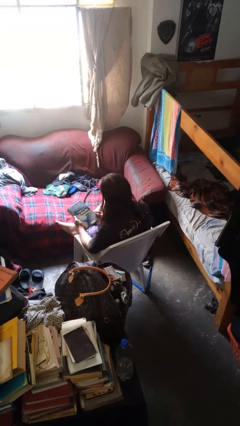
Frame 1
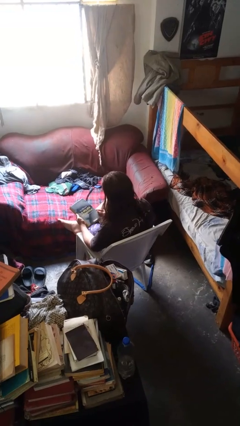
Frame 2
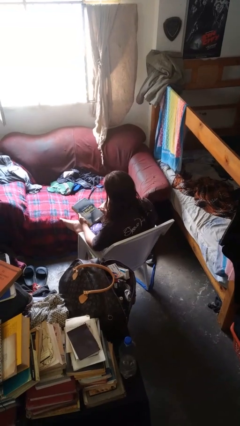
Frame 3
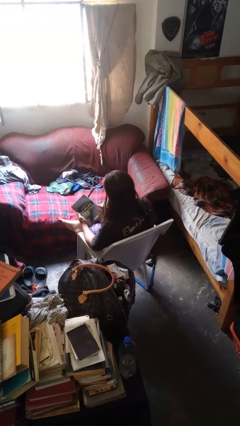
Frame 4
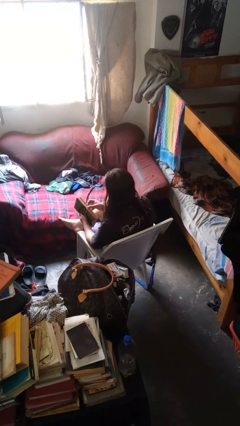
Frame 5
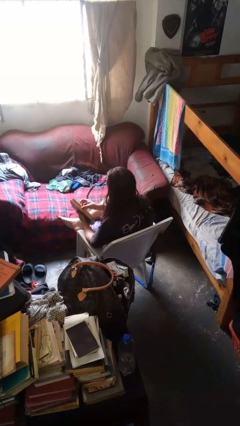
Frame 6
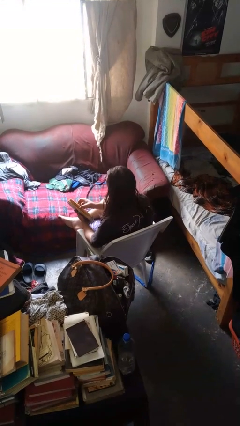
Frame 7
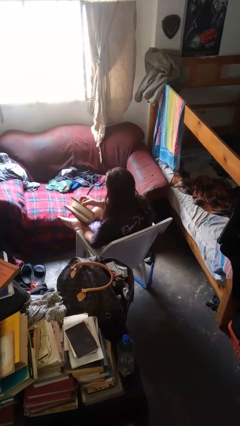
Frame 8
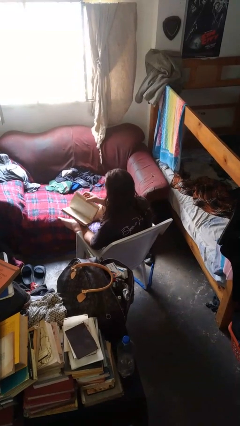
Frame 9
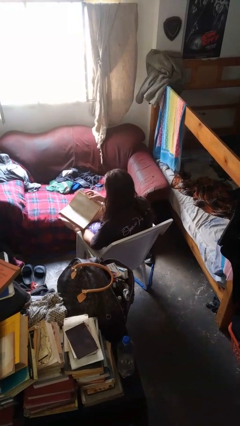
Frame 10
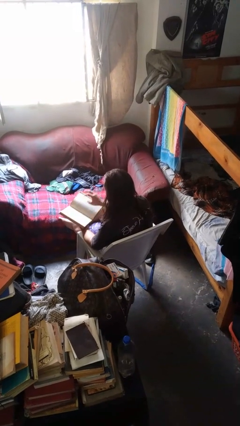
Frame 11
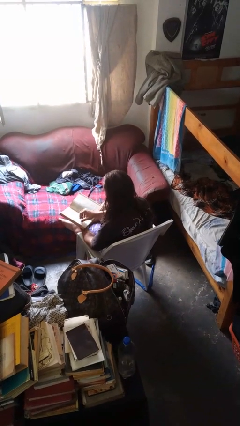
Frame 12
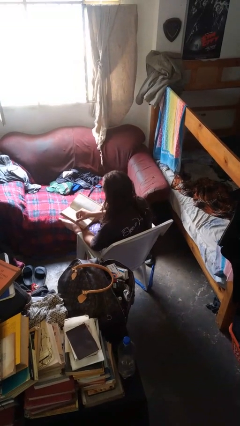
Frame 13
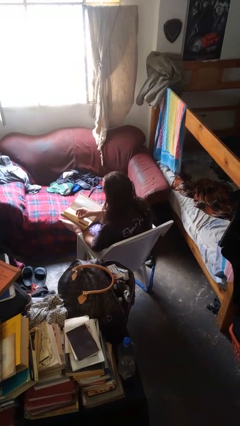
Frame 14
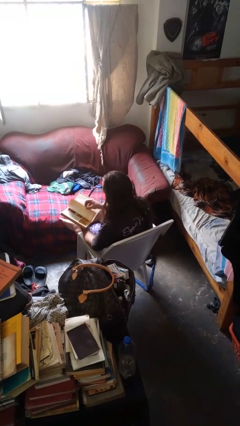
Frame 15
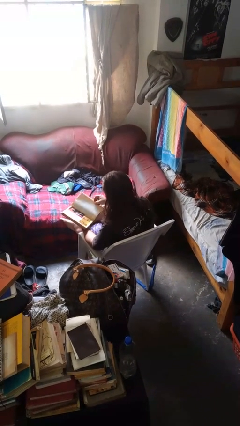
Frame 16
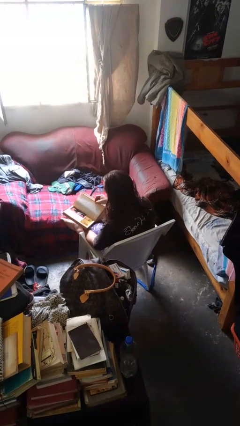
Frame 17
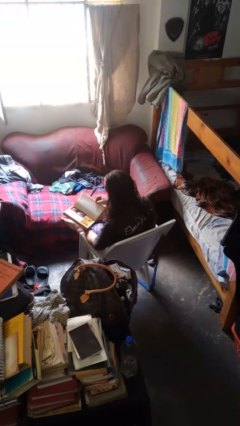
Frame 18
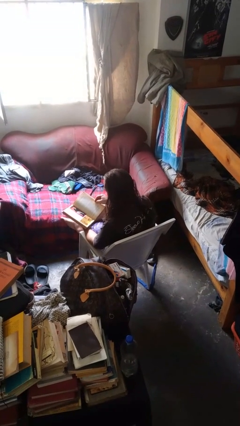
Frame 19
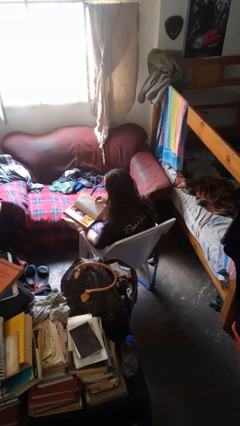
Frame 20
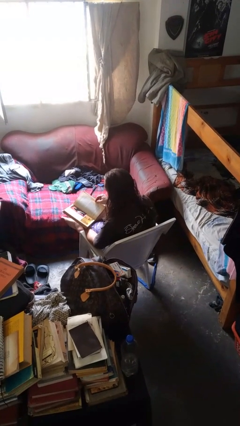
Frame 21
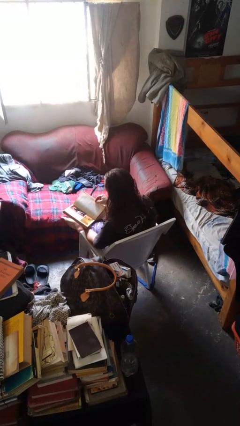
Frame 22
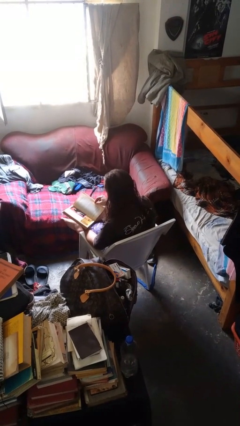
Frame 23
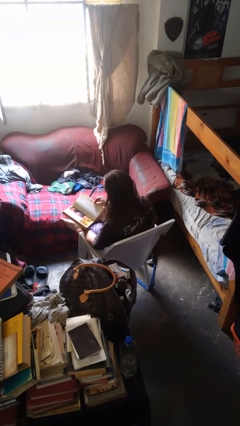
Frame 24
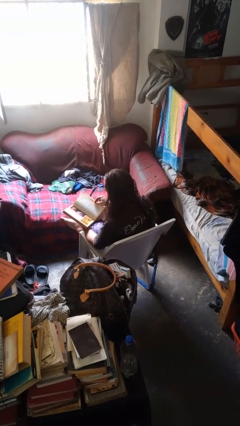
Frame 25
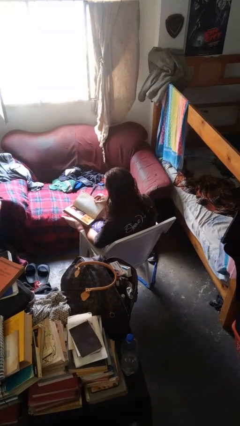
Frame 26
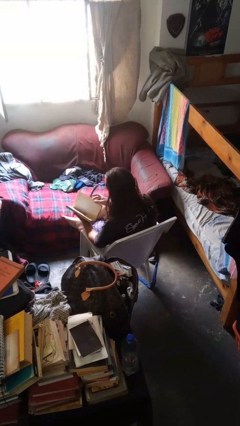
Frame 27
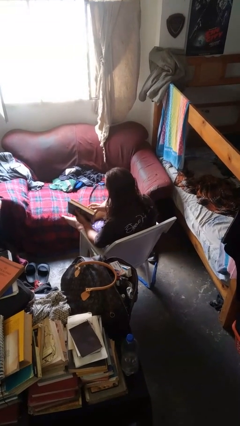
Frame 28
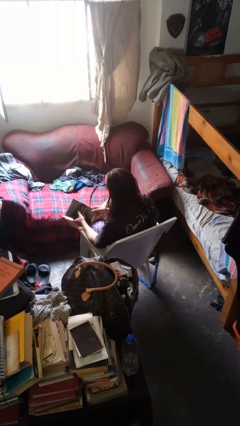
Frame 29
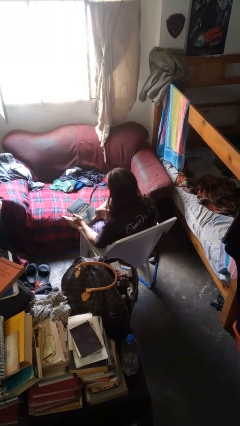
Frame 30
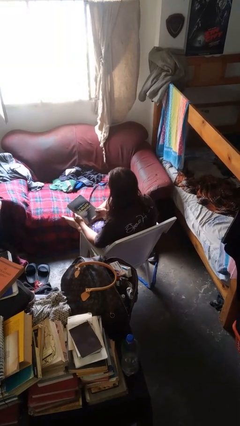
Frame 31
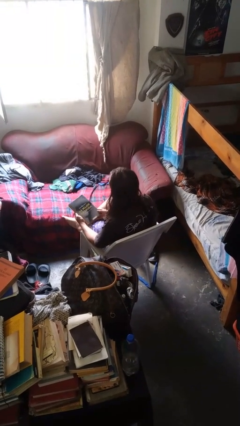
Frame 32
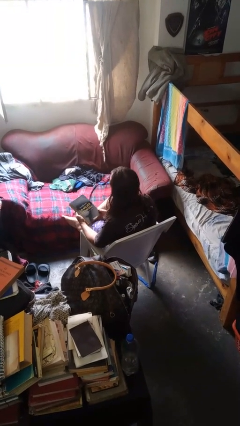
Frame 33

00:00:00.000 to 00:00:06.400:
person reads book

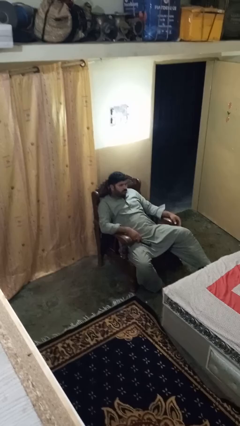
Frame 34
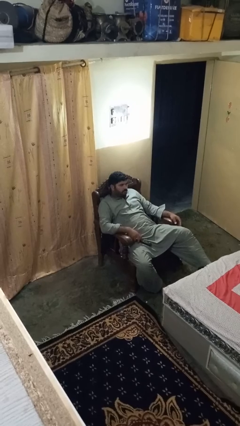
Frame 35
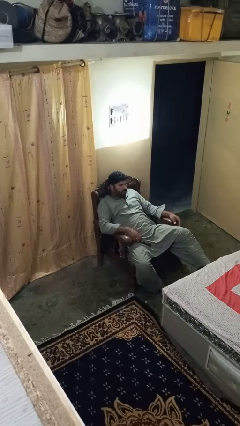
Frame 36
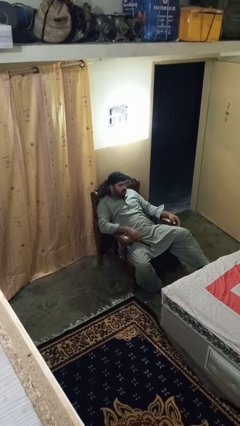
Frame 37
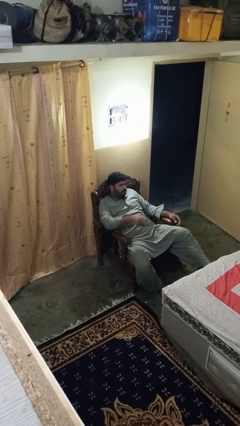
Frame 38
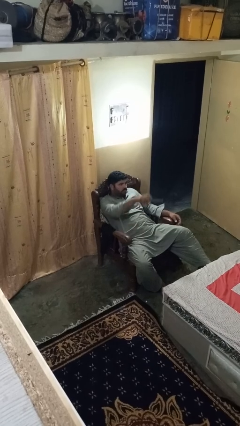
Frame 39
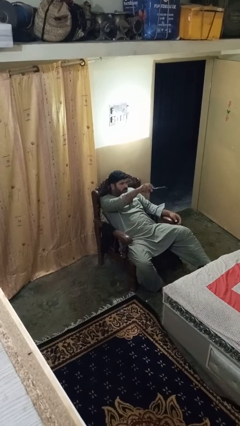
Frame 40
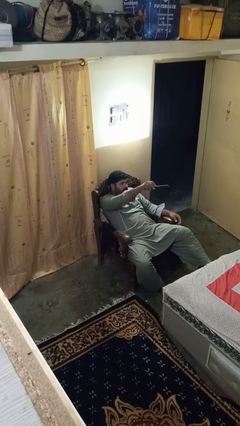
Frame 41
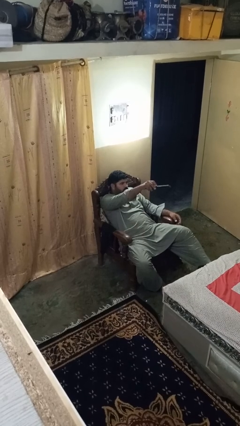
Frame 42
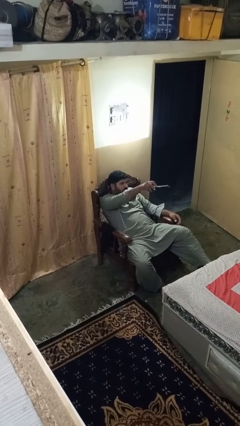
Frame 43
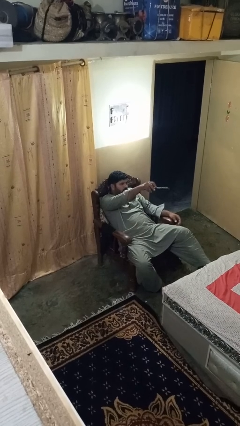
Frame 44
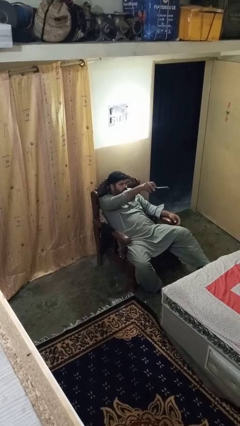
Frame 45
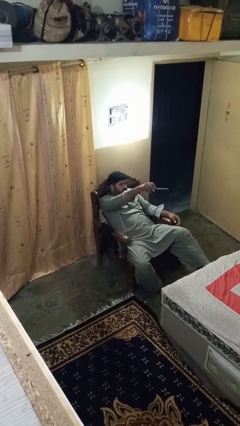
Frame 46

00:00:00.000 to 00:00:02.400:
person uses television remote

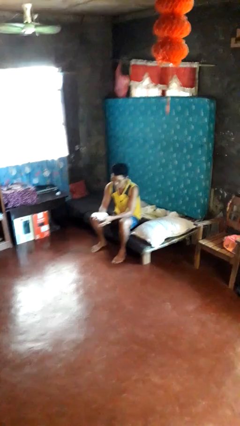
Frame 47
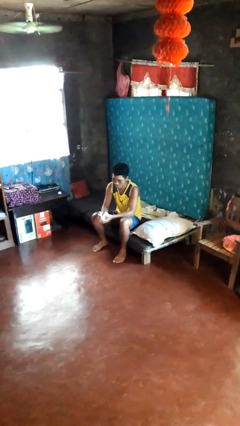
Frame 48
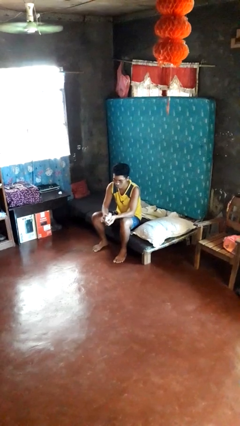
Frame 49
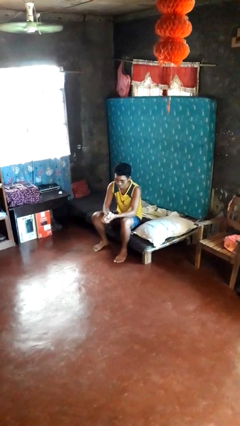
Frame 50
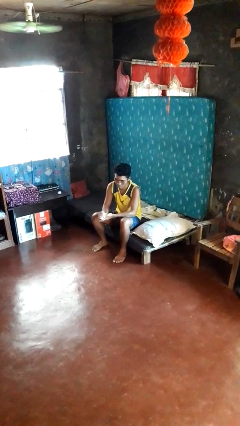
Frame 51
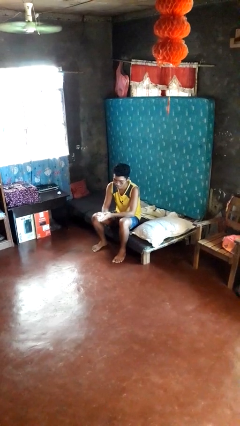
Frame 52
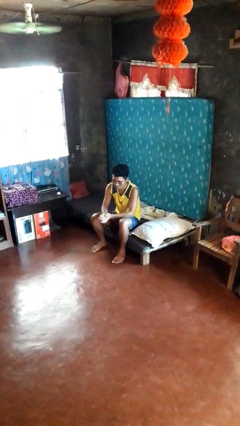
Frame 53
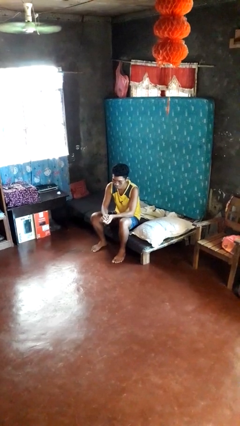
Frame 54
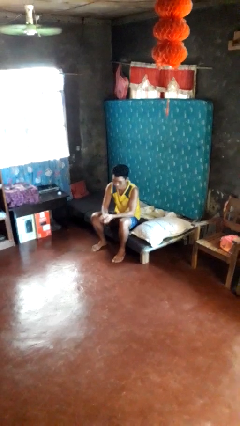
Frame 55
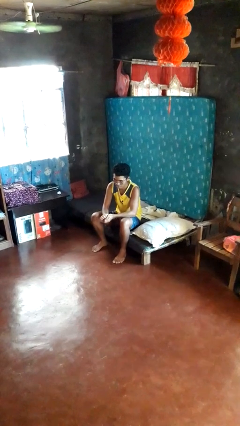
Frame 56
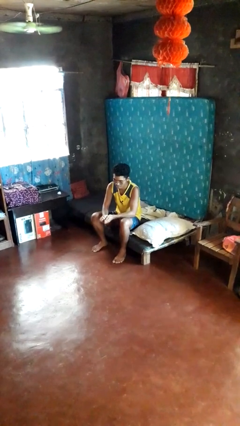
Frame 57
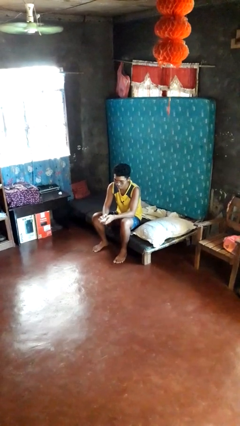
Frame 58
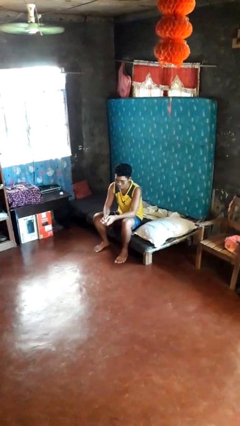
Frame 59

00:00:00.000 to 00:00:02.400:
person crumples paper

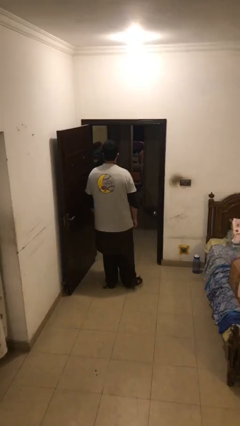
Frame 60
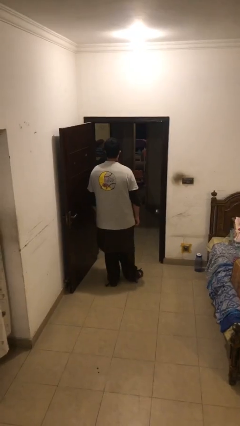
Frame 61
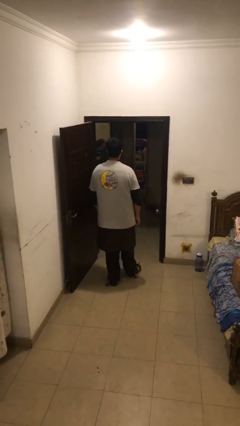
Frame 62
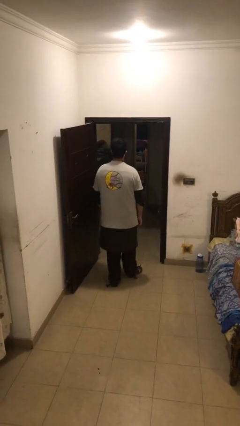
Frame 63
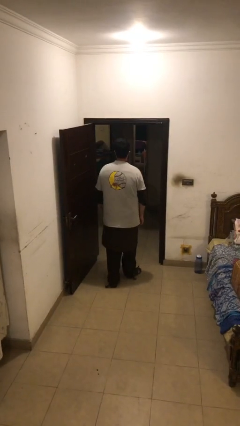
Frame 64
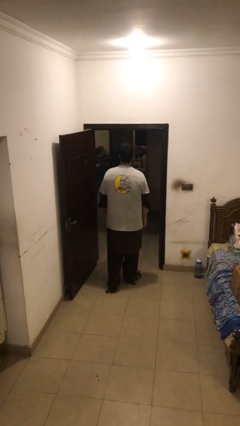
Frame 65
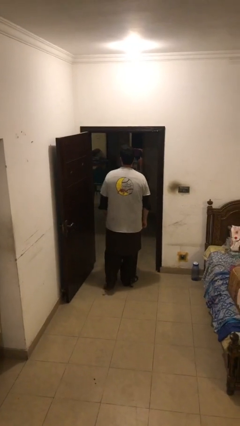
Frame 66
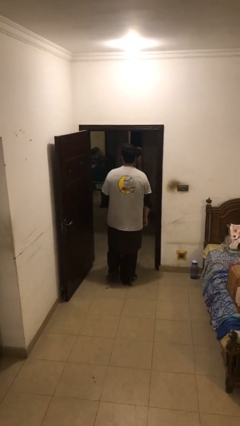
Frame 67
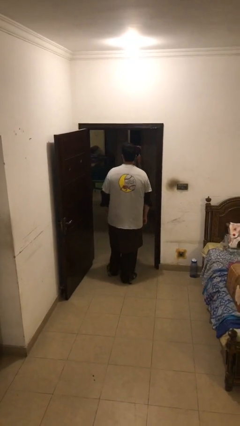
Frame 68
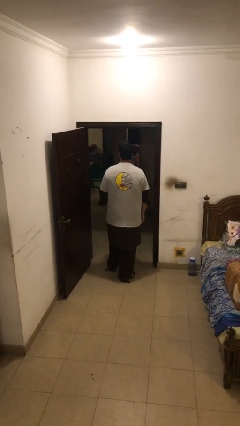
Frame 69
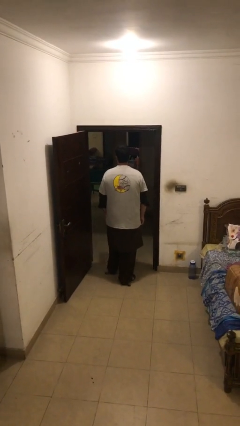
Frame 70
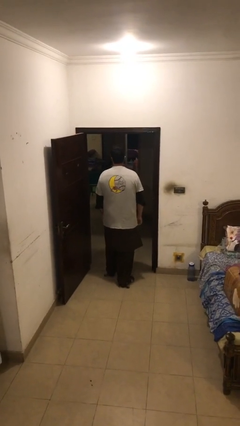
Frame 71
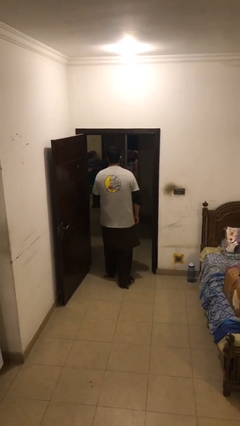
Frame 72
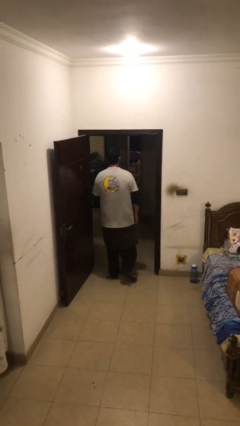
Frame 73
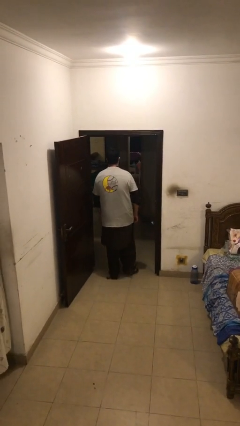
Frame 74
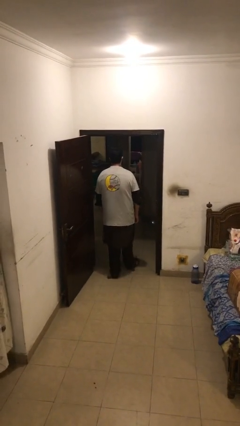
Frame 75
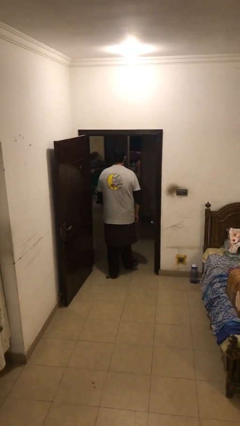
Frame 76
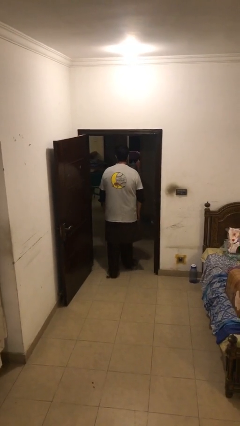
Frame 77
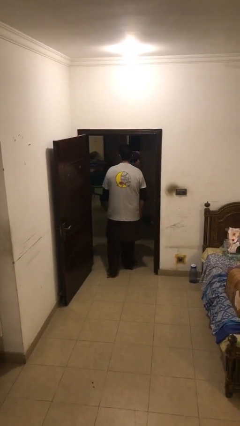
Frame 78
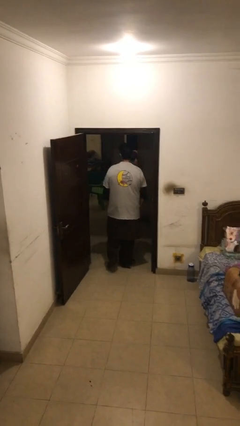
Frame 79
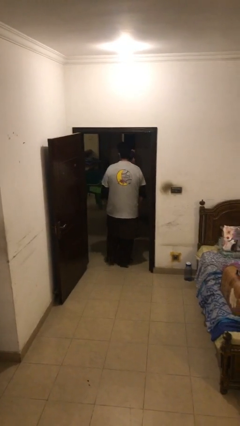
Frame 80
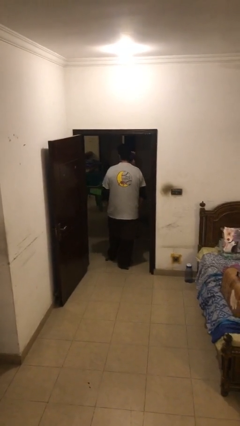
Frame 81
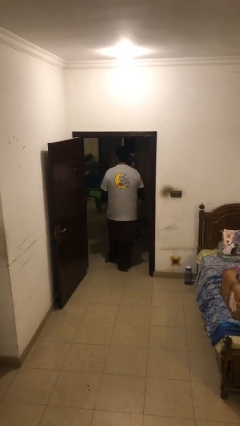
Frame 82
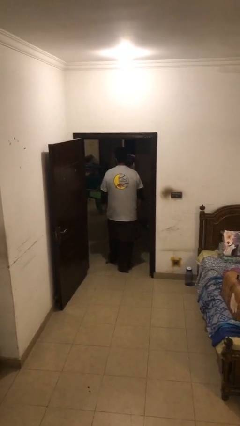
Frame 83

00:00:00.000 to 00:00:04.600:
person exits scene through structure

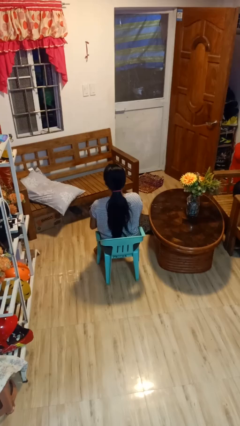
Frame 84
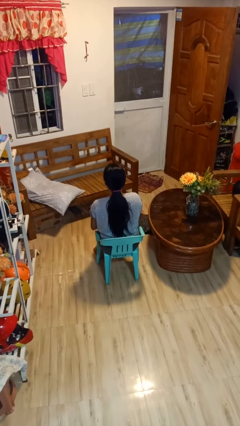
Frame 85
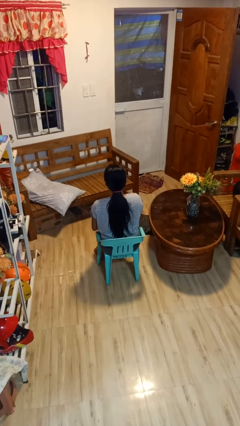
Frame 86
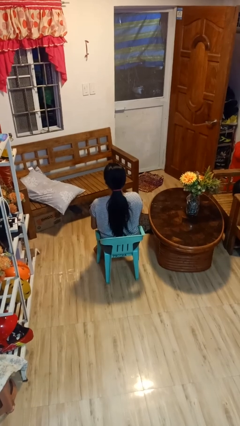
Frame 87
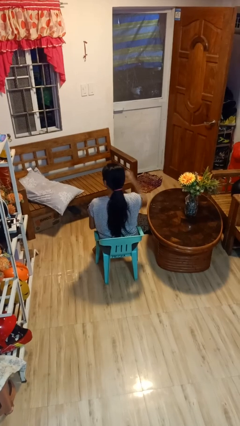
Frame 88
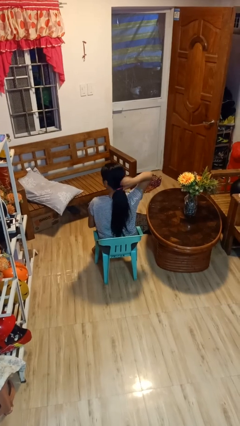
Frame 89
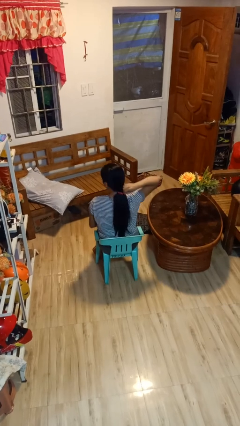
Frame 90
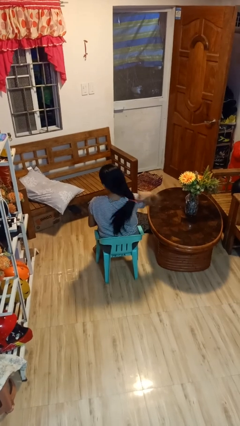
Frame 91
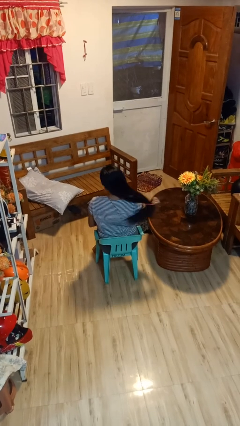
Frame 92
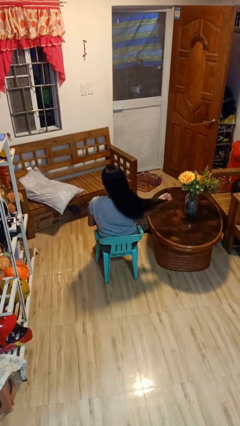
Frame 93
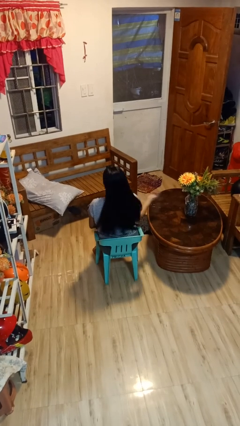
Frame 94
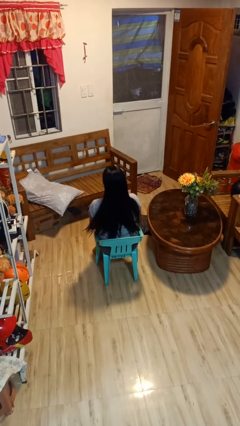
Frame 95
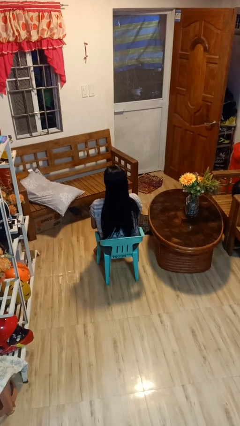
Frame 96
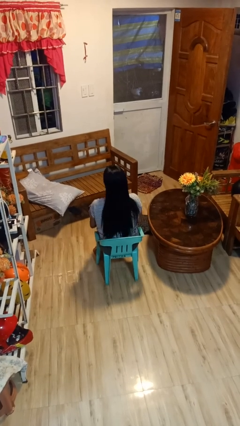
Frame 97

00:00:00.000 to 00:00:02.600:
person takes off hairtie
